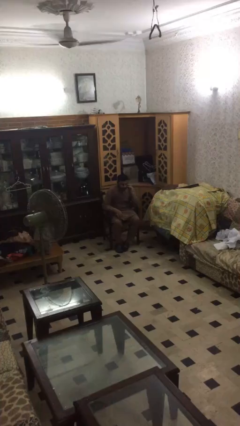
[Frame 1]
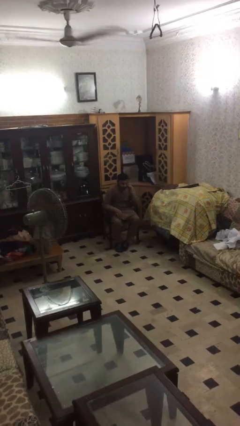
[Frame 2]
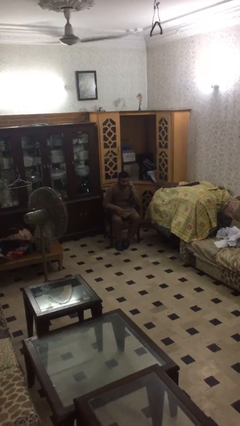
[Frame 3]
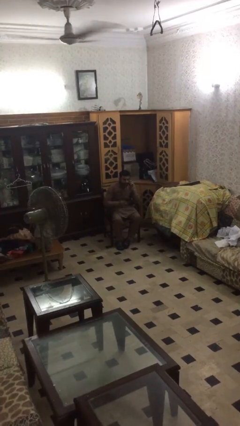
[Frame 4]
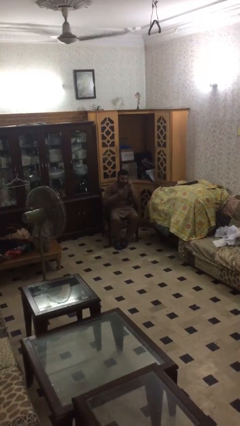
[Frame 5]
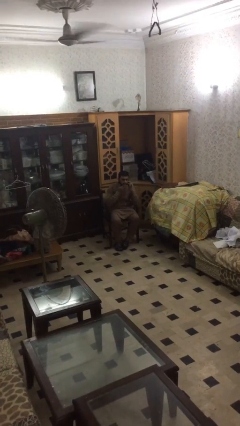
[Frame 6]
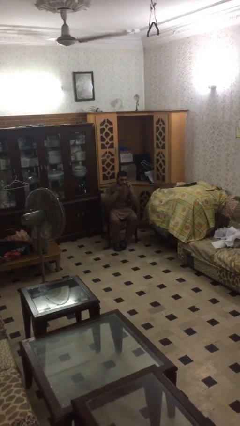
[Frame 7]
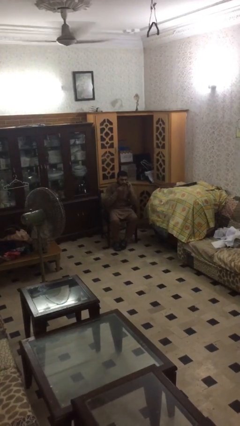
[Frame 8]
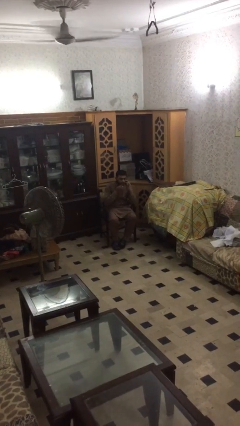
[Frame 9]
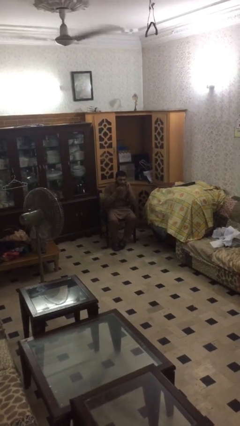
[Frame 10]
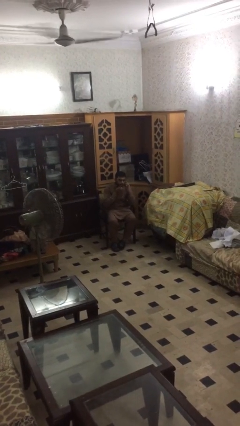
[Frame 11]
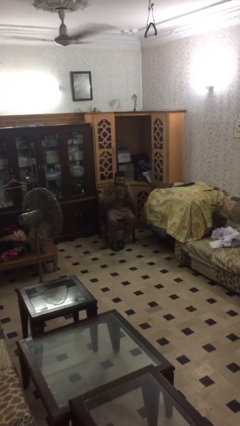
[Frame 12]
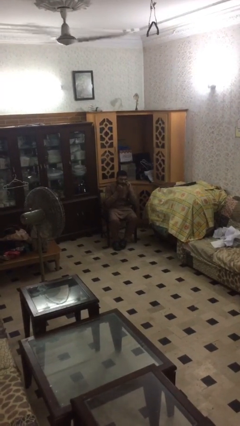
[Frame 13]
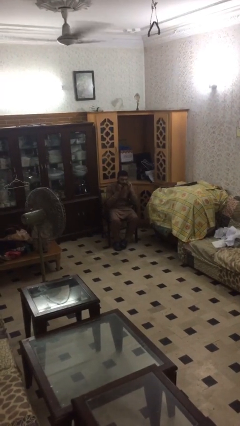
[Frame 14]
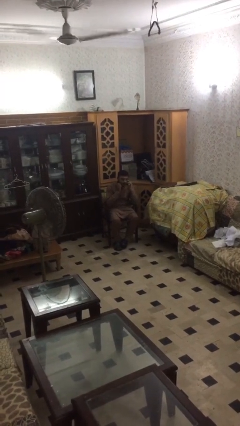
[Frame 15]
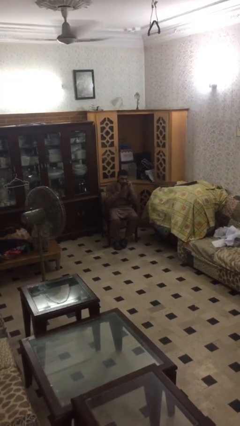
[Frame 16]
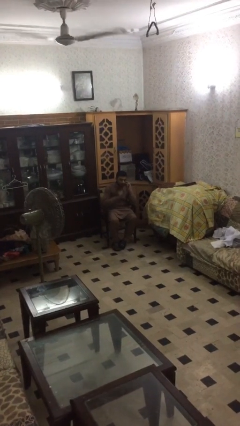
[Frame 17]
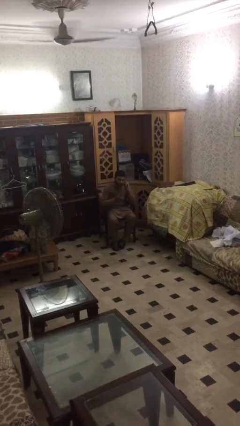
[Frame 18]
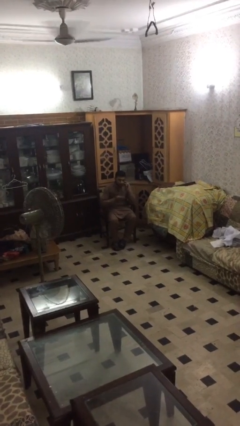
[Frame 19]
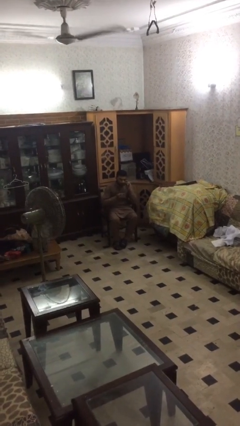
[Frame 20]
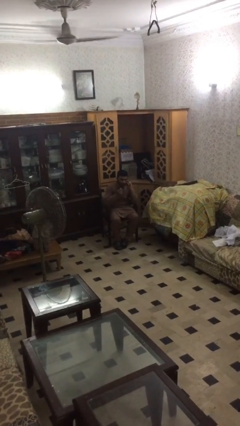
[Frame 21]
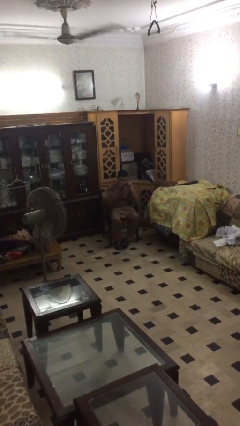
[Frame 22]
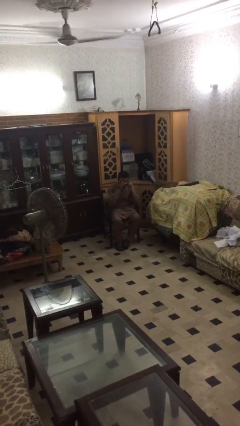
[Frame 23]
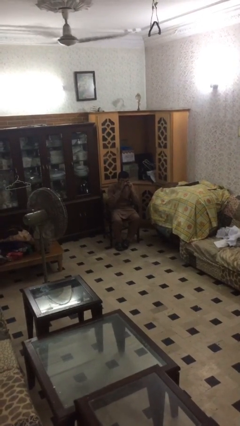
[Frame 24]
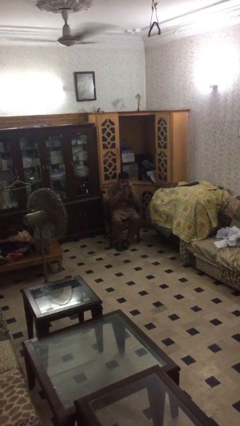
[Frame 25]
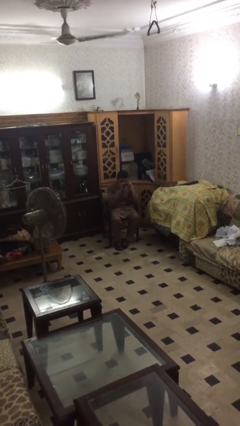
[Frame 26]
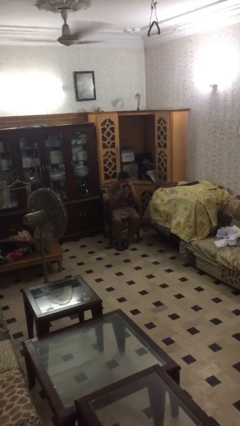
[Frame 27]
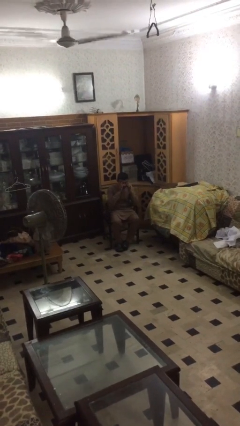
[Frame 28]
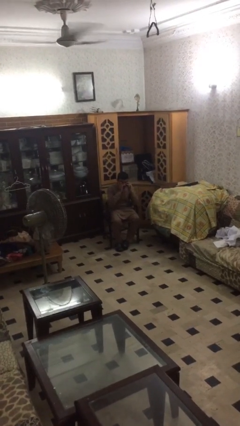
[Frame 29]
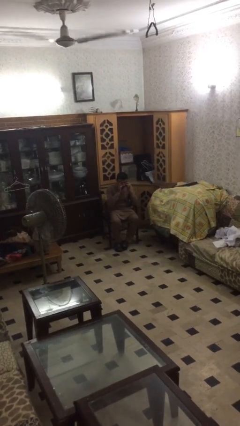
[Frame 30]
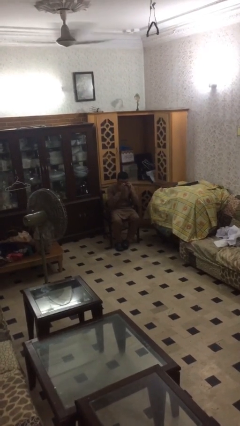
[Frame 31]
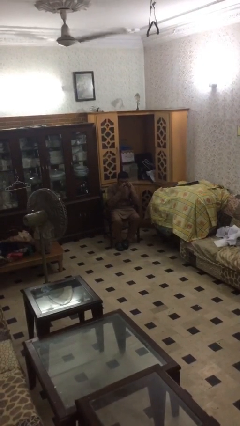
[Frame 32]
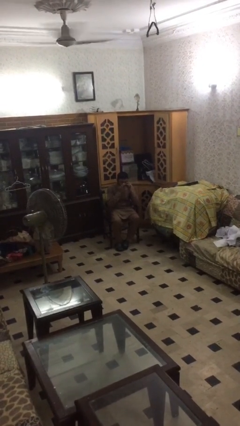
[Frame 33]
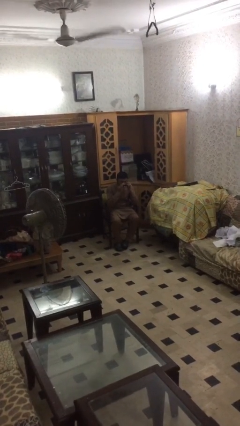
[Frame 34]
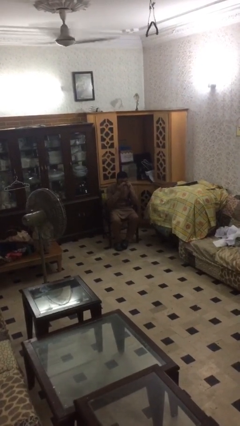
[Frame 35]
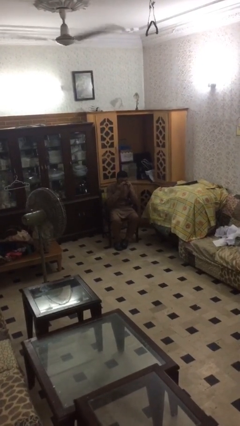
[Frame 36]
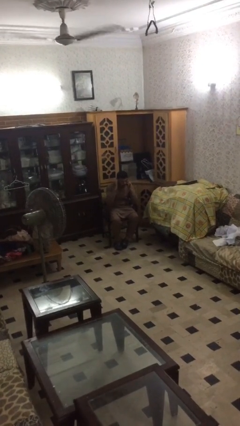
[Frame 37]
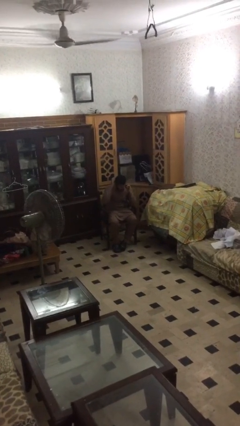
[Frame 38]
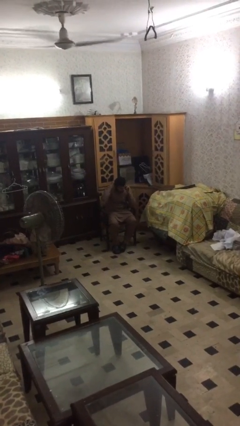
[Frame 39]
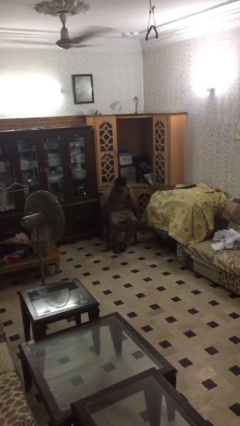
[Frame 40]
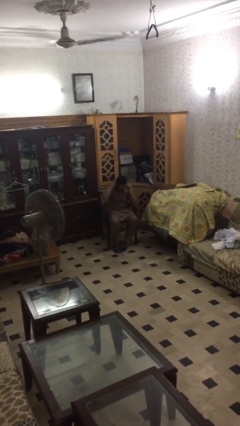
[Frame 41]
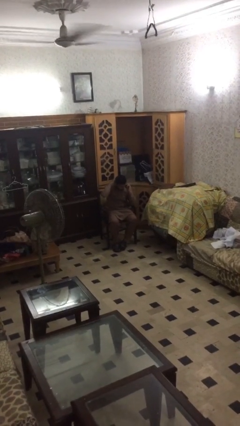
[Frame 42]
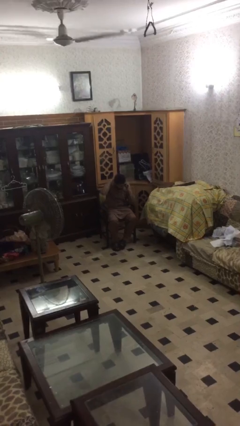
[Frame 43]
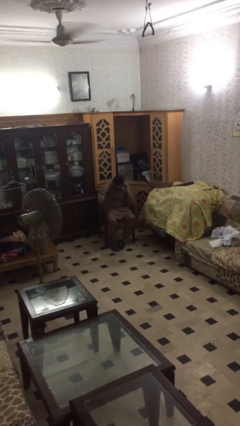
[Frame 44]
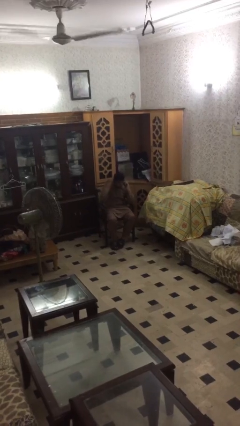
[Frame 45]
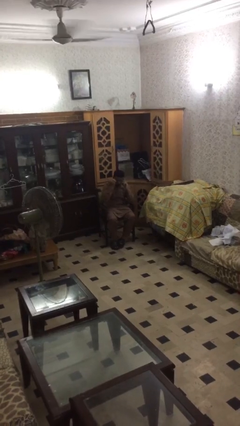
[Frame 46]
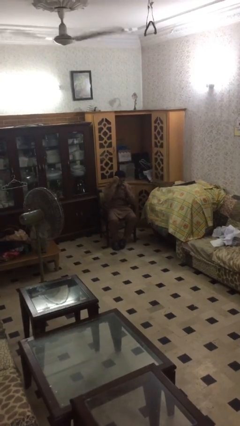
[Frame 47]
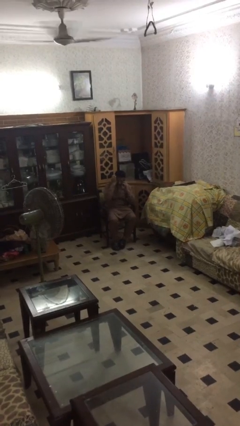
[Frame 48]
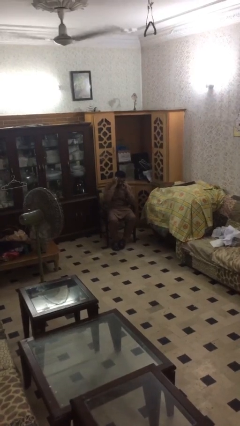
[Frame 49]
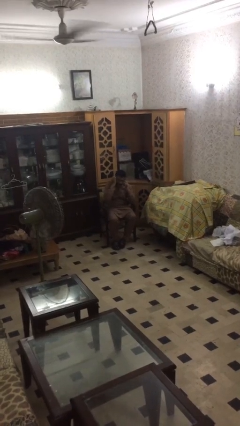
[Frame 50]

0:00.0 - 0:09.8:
person talks on phone

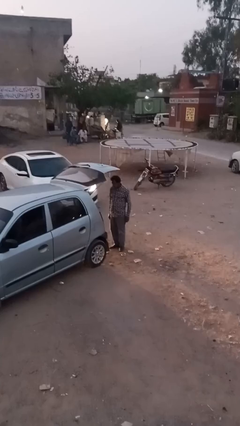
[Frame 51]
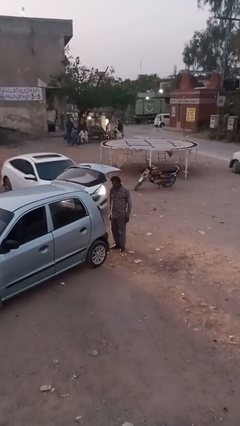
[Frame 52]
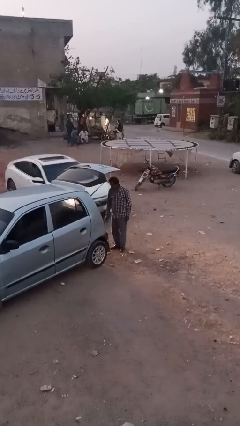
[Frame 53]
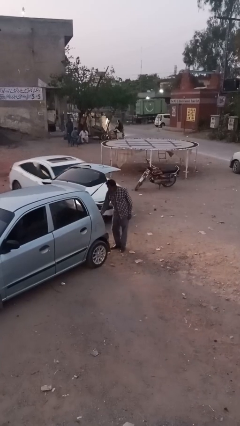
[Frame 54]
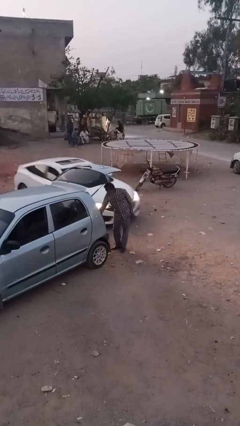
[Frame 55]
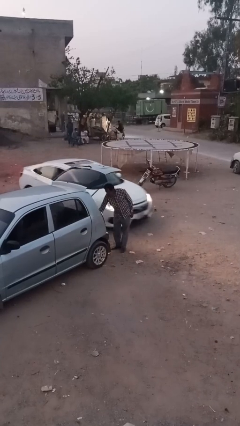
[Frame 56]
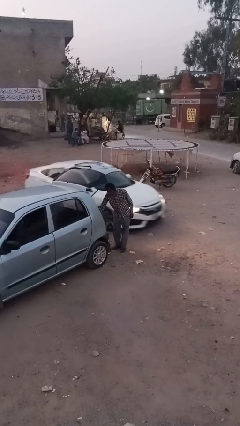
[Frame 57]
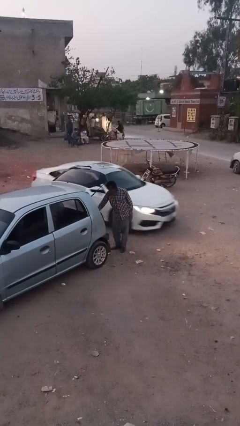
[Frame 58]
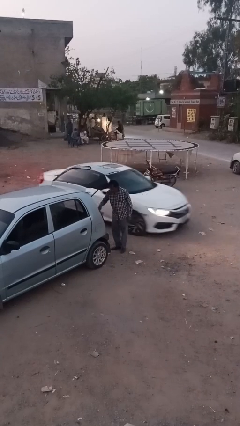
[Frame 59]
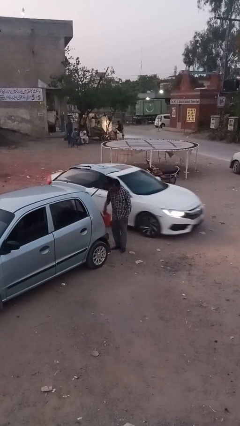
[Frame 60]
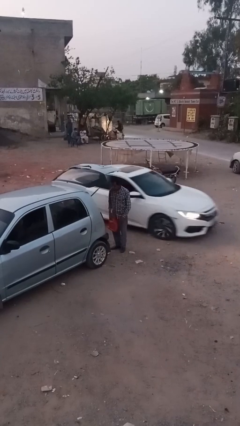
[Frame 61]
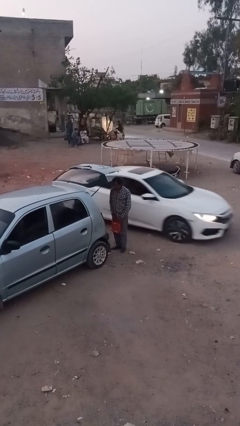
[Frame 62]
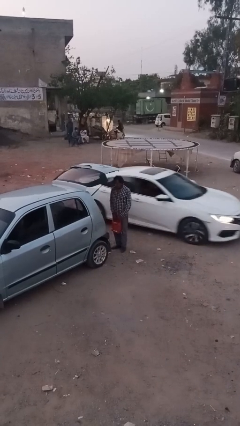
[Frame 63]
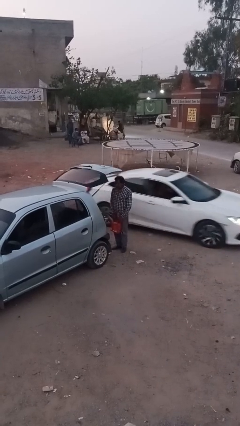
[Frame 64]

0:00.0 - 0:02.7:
person unloads car

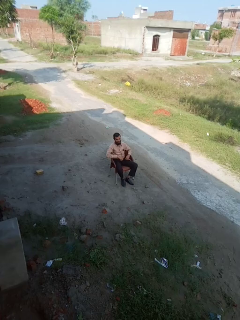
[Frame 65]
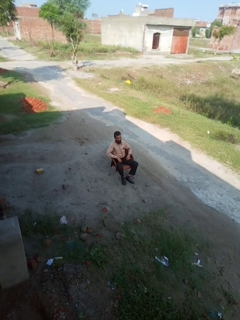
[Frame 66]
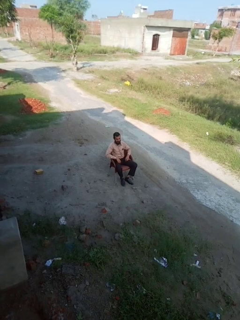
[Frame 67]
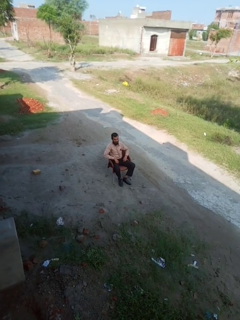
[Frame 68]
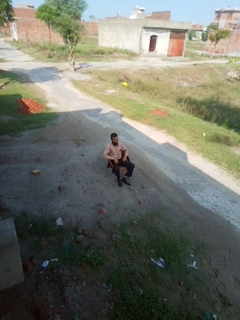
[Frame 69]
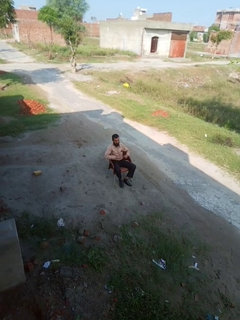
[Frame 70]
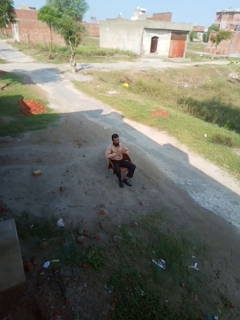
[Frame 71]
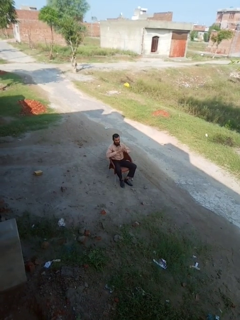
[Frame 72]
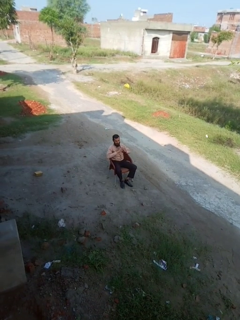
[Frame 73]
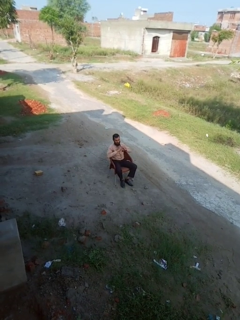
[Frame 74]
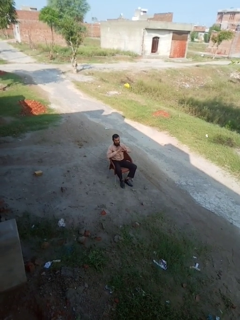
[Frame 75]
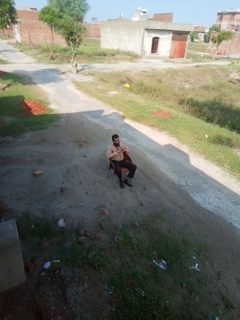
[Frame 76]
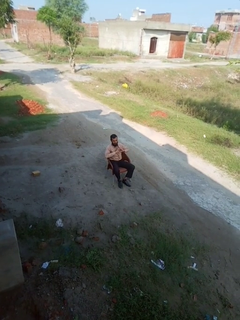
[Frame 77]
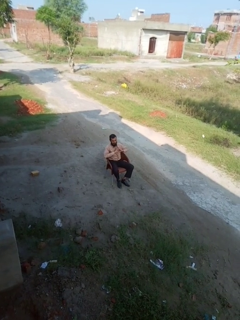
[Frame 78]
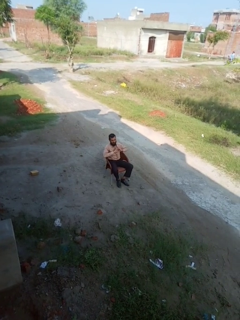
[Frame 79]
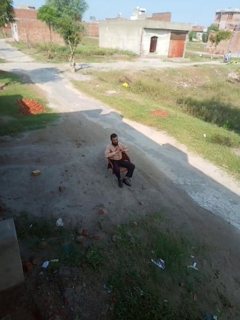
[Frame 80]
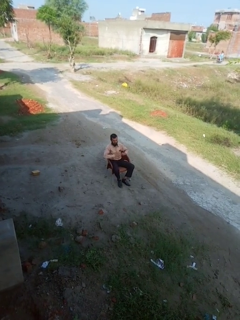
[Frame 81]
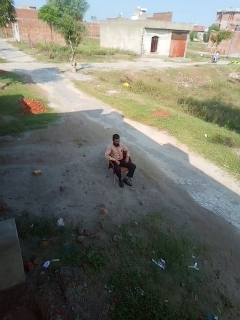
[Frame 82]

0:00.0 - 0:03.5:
person gestures heart

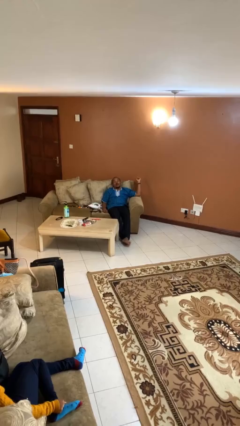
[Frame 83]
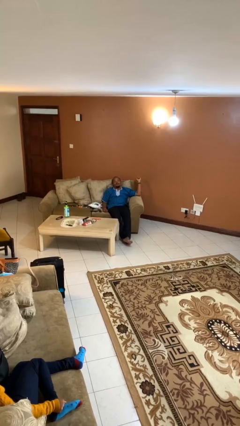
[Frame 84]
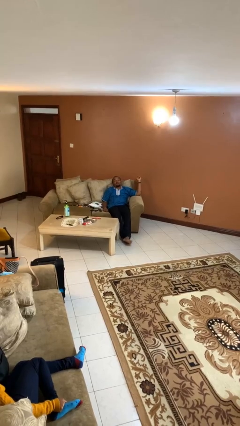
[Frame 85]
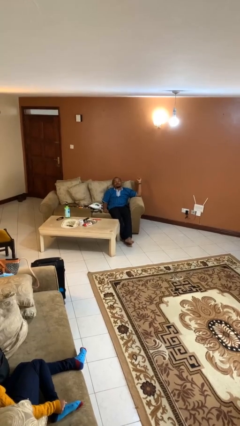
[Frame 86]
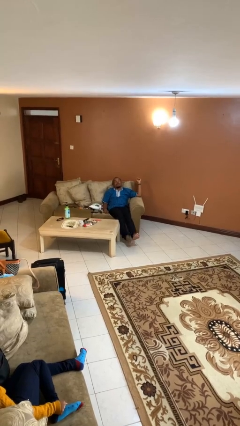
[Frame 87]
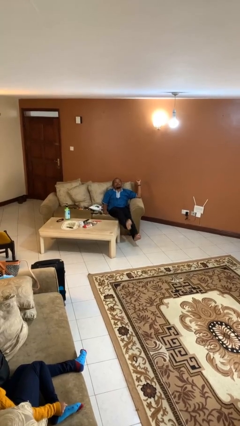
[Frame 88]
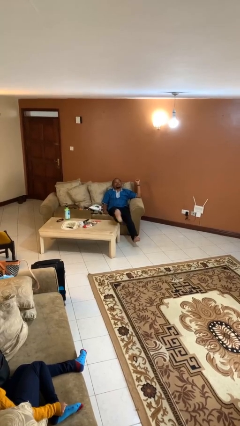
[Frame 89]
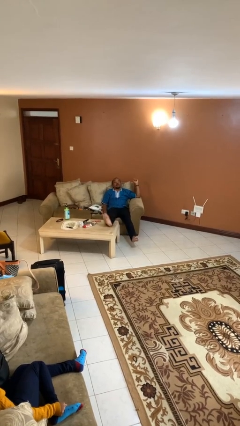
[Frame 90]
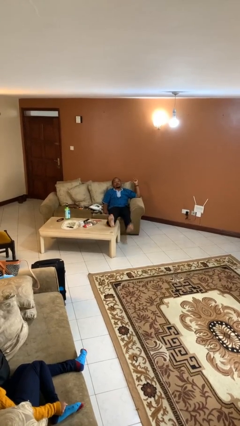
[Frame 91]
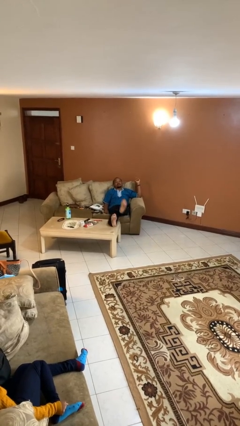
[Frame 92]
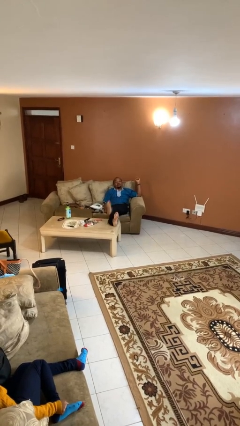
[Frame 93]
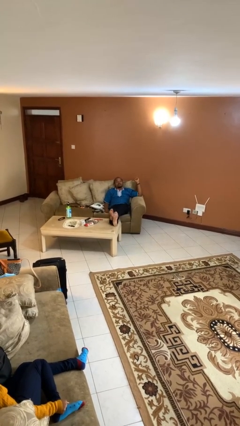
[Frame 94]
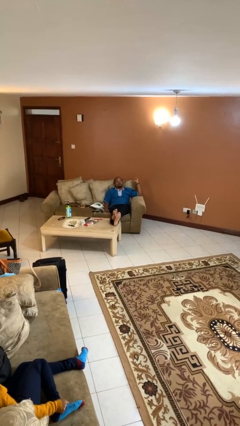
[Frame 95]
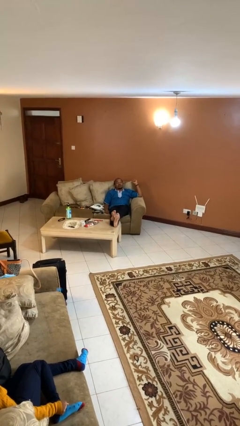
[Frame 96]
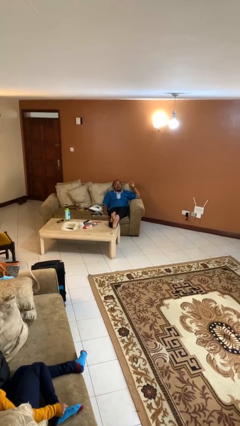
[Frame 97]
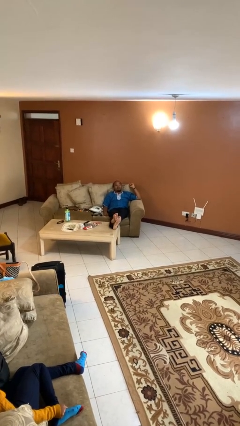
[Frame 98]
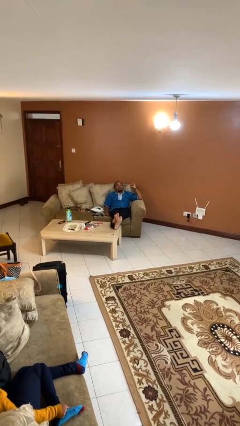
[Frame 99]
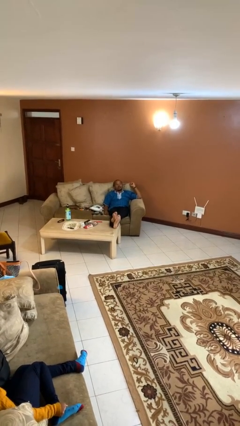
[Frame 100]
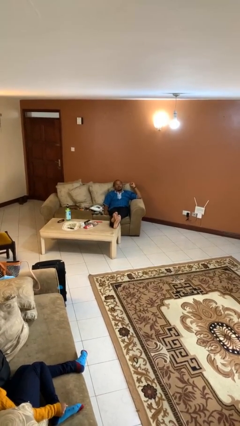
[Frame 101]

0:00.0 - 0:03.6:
person puts feet up
